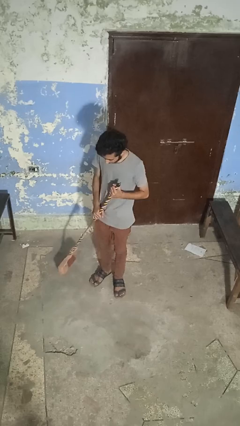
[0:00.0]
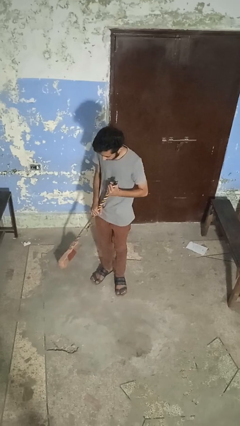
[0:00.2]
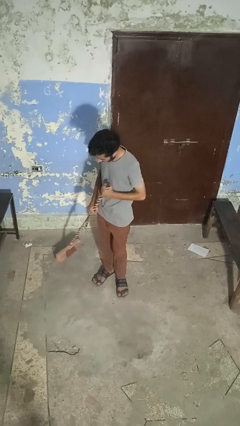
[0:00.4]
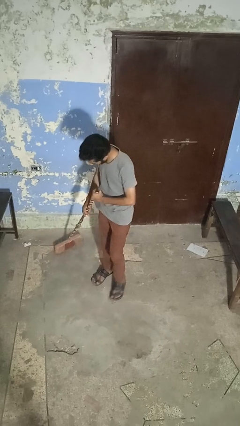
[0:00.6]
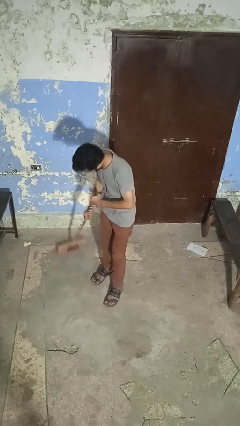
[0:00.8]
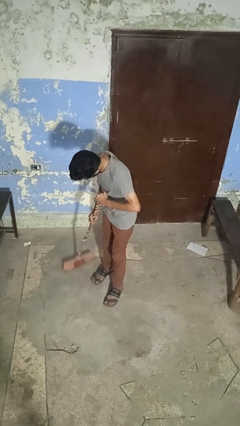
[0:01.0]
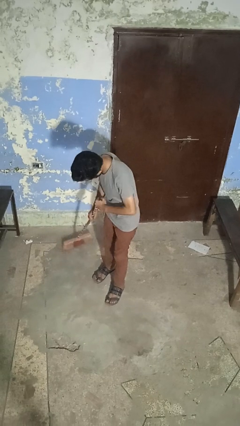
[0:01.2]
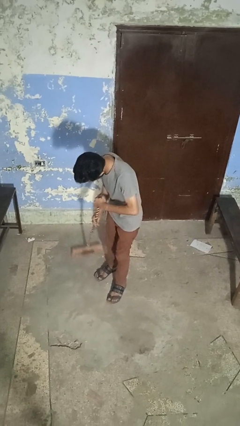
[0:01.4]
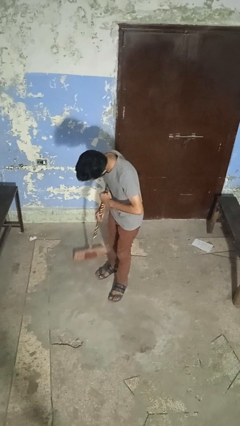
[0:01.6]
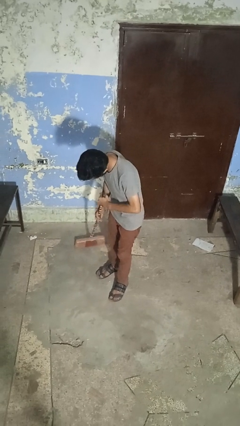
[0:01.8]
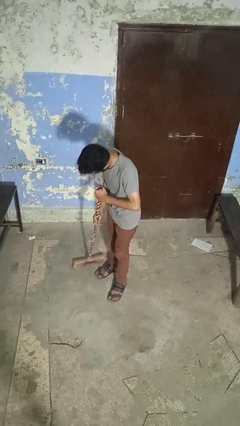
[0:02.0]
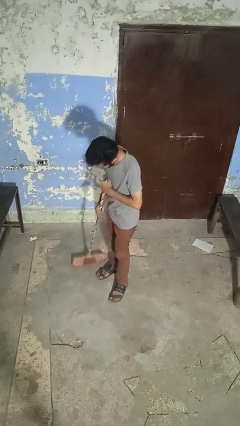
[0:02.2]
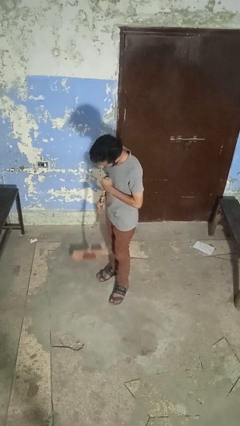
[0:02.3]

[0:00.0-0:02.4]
person sweeps floor

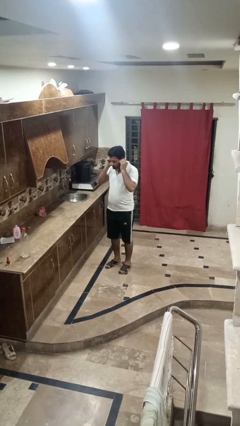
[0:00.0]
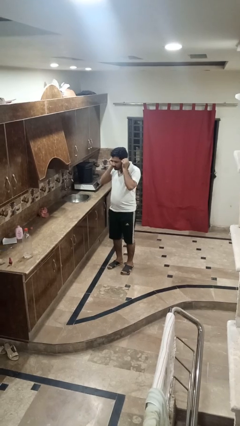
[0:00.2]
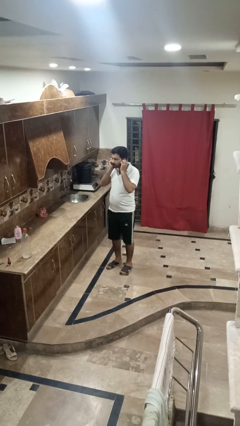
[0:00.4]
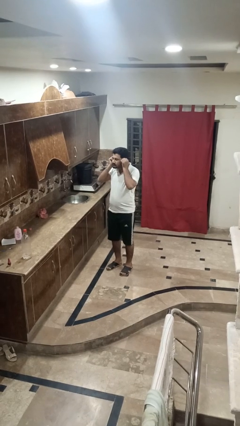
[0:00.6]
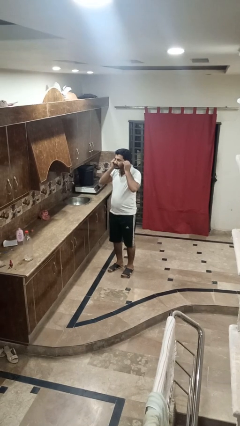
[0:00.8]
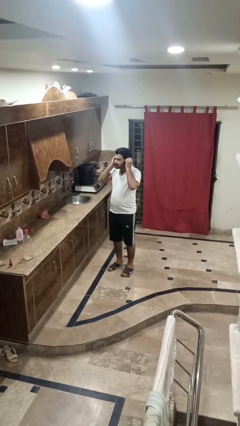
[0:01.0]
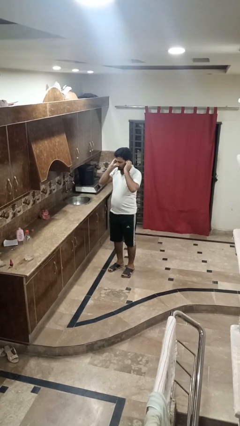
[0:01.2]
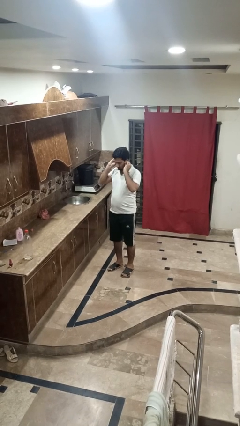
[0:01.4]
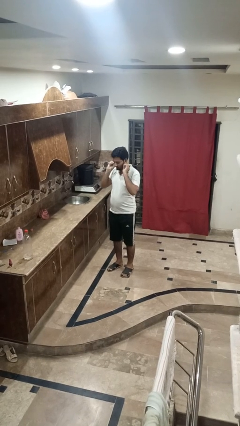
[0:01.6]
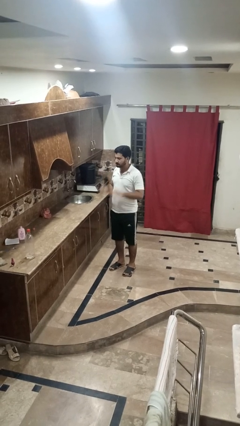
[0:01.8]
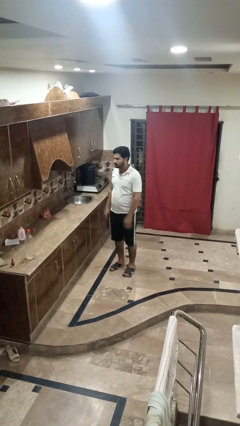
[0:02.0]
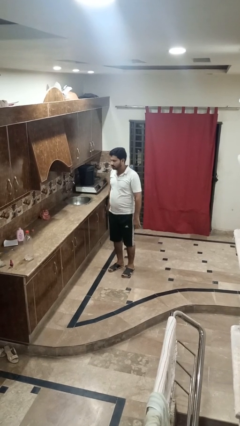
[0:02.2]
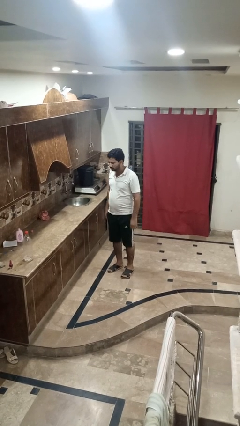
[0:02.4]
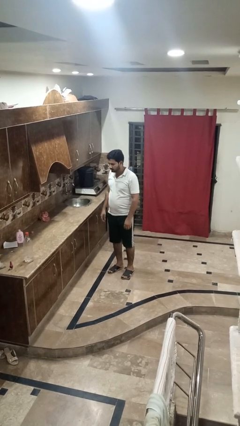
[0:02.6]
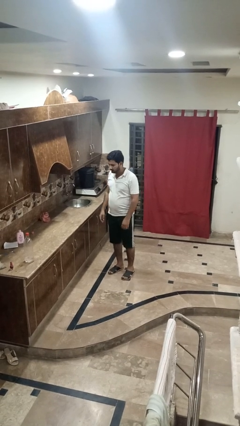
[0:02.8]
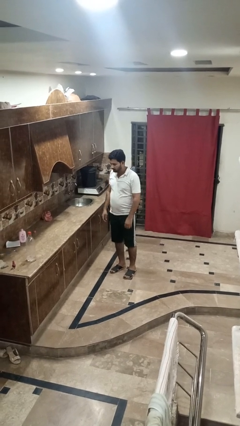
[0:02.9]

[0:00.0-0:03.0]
person touches earlobe

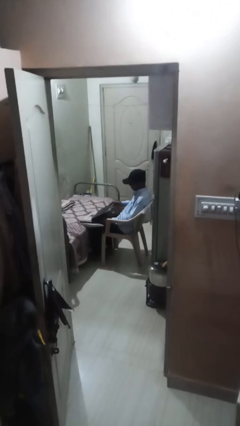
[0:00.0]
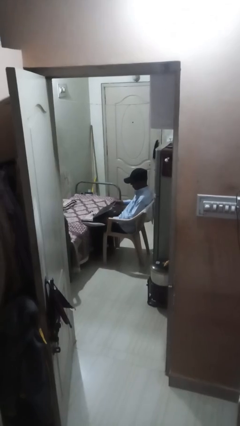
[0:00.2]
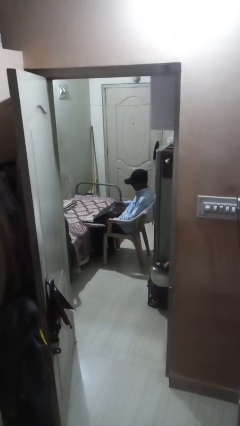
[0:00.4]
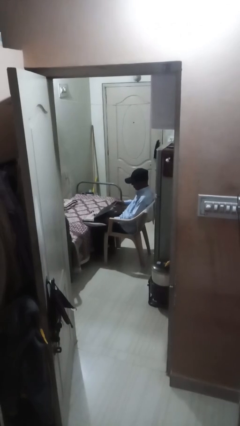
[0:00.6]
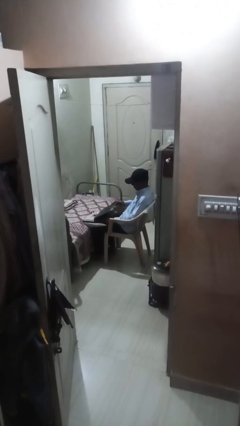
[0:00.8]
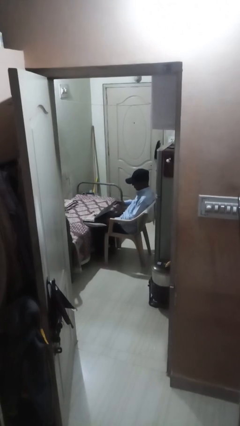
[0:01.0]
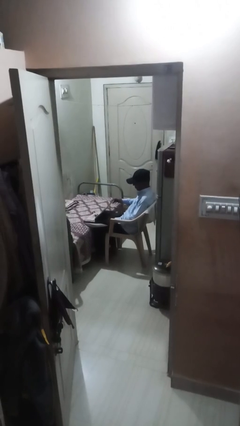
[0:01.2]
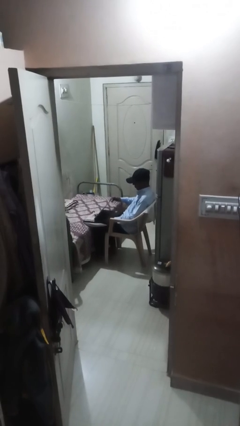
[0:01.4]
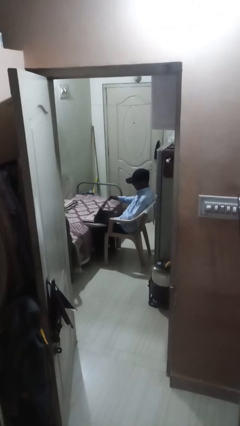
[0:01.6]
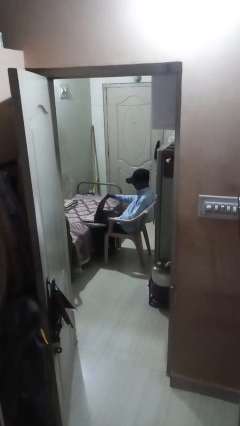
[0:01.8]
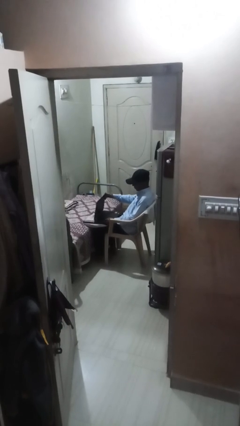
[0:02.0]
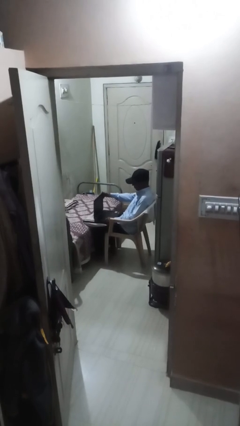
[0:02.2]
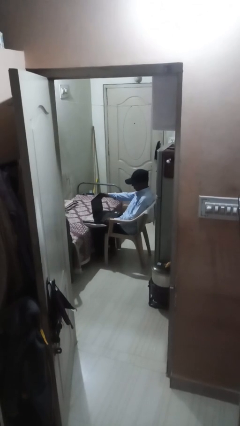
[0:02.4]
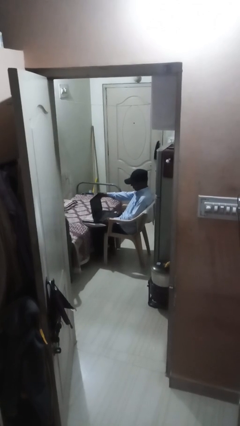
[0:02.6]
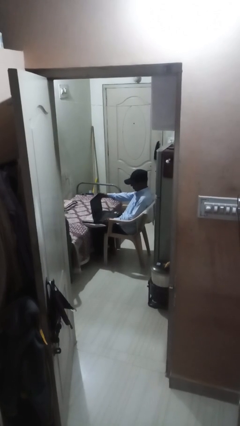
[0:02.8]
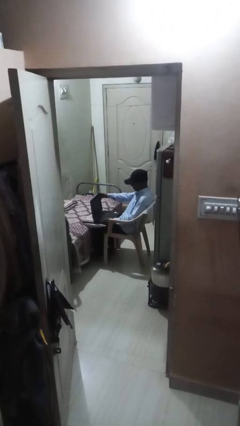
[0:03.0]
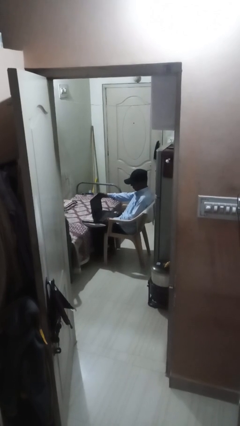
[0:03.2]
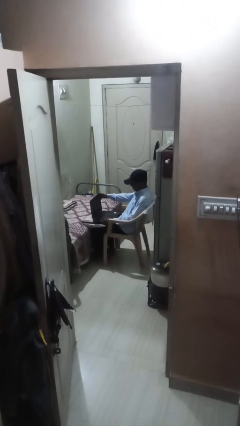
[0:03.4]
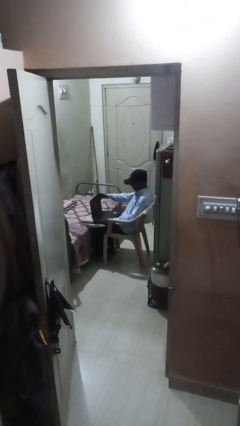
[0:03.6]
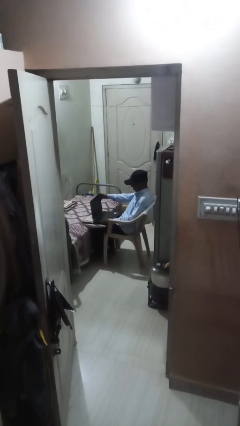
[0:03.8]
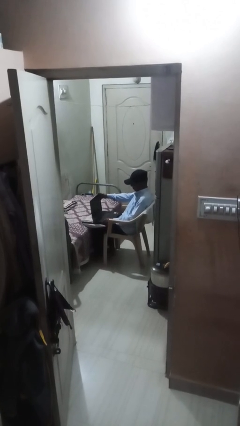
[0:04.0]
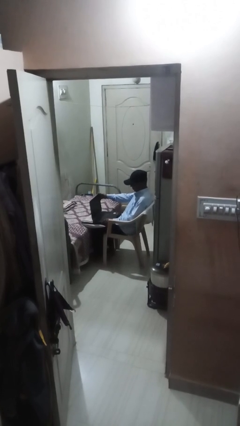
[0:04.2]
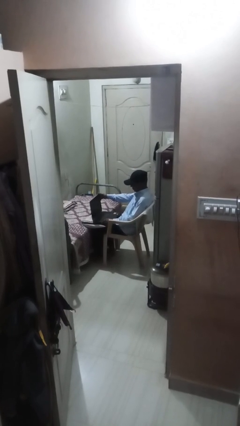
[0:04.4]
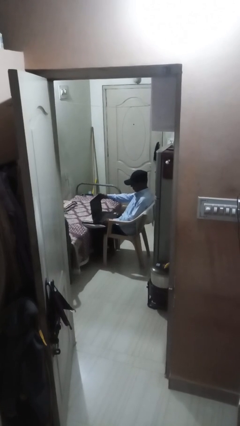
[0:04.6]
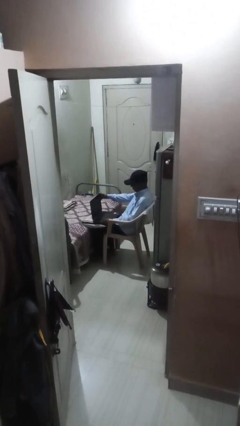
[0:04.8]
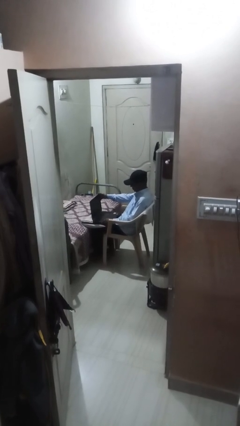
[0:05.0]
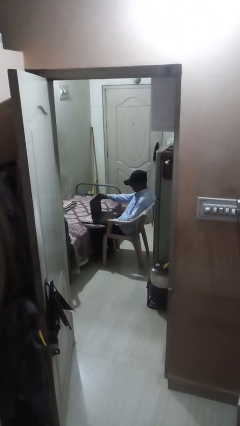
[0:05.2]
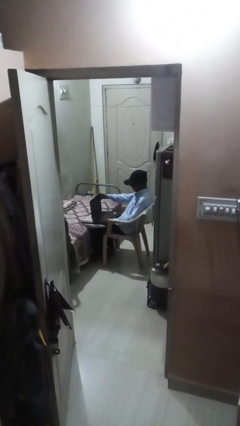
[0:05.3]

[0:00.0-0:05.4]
person interacts with laptop

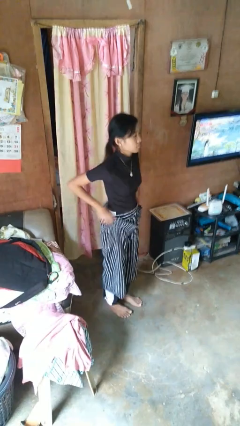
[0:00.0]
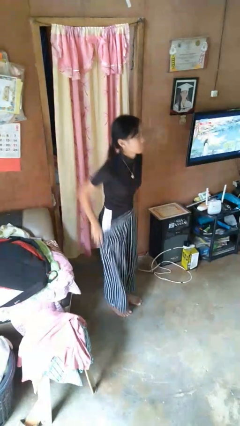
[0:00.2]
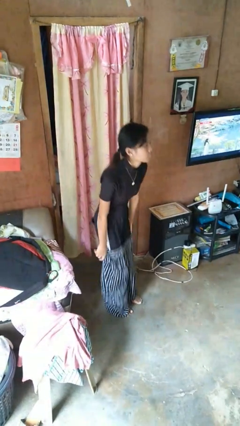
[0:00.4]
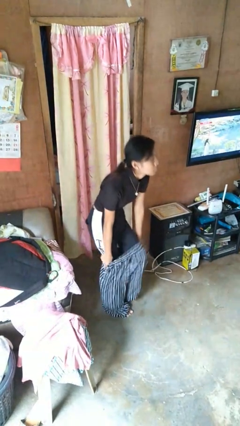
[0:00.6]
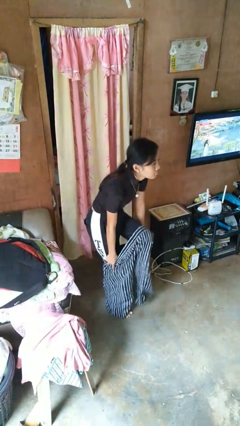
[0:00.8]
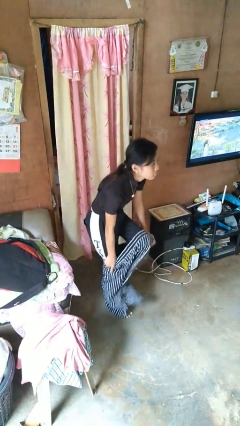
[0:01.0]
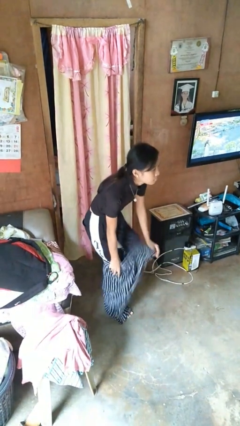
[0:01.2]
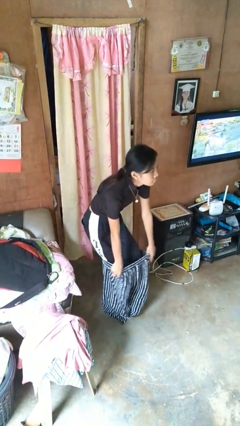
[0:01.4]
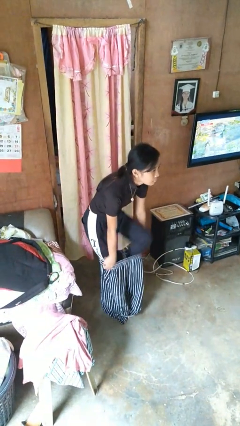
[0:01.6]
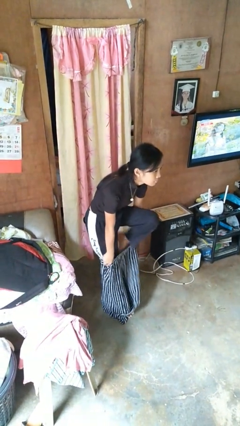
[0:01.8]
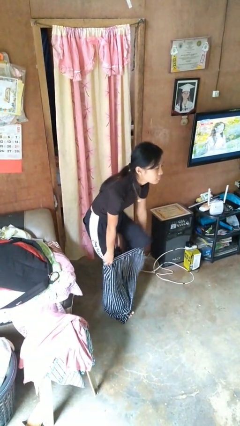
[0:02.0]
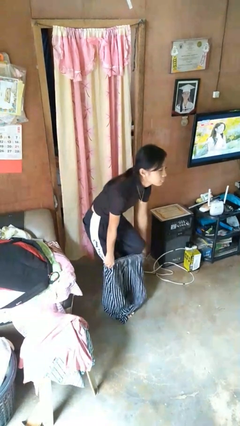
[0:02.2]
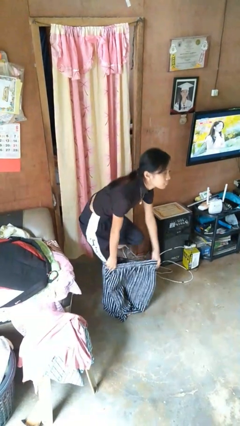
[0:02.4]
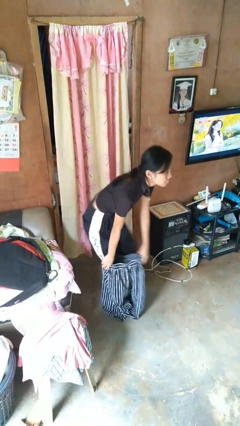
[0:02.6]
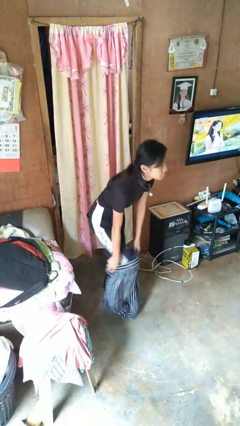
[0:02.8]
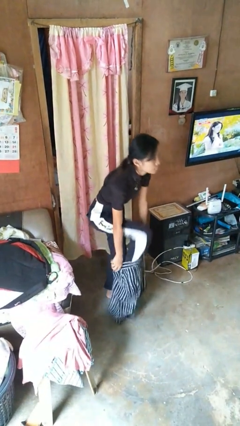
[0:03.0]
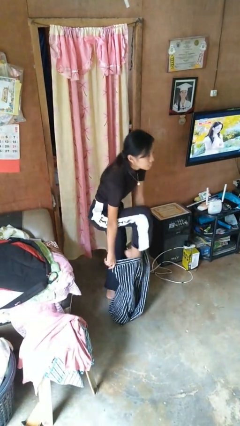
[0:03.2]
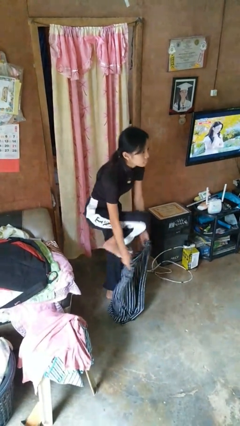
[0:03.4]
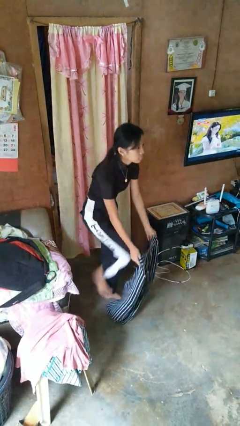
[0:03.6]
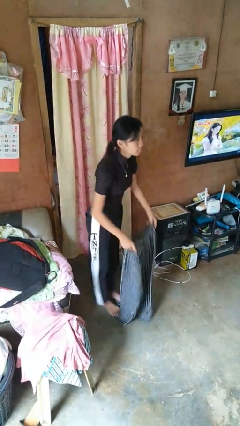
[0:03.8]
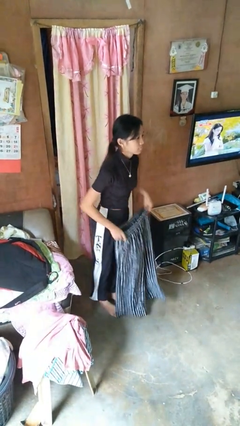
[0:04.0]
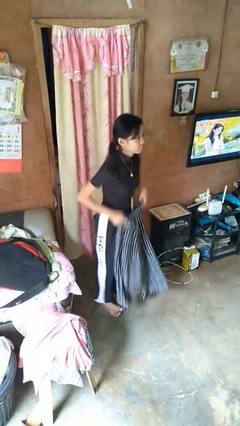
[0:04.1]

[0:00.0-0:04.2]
person takes off pants

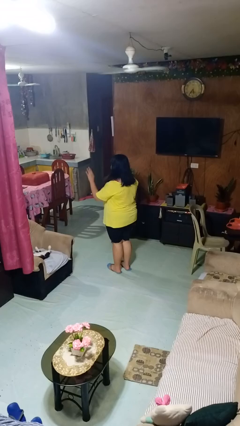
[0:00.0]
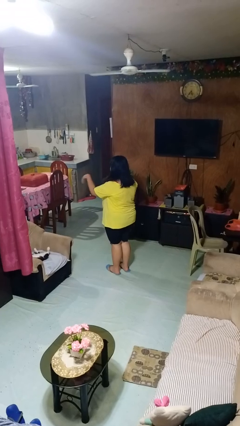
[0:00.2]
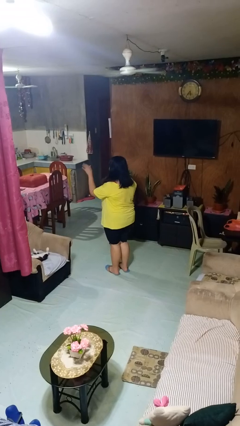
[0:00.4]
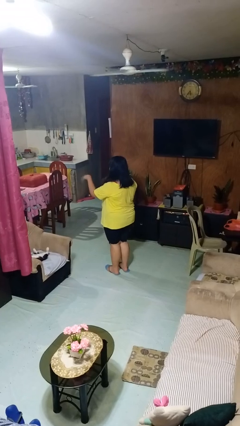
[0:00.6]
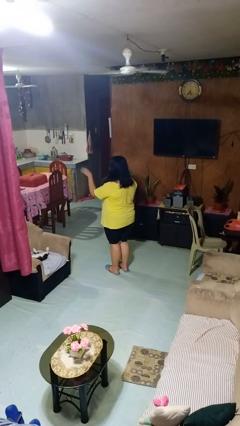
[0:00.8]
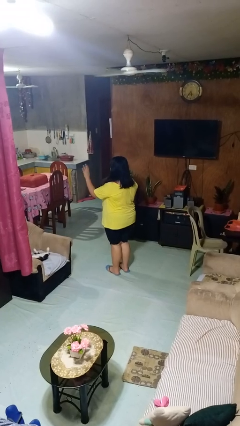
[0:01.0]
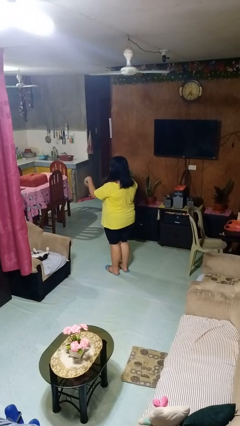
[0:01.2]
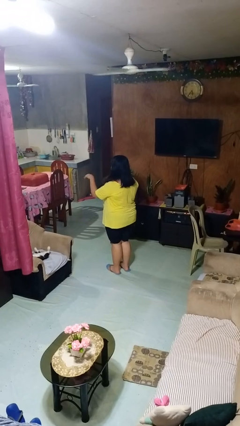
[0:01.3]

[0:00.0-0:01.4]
person gestures come here

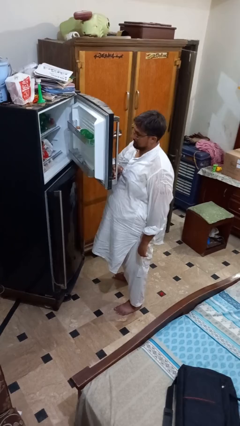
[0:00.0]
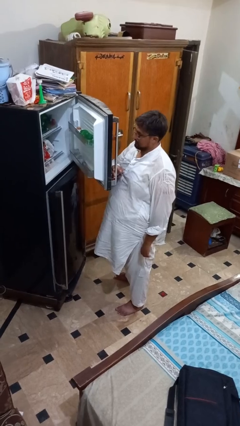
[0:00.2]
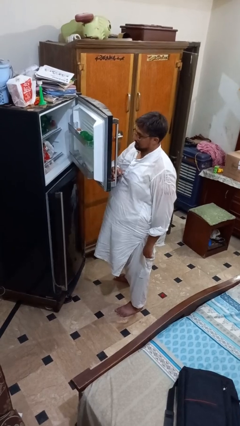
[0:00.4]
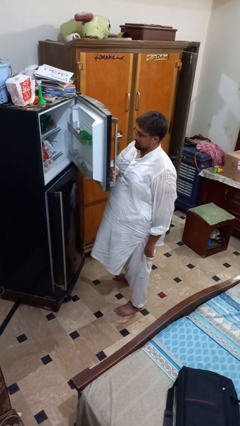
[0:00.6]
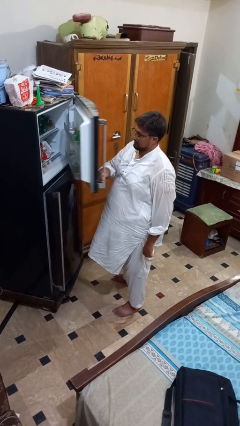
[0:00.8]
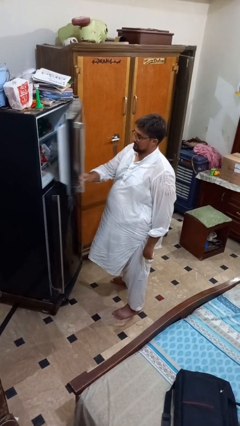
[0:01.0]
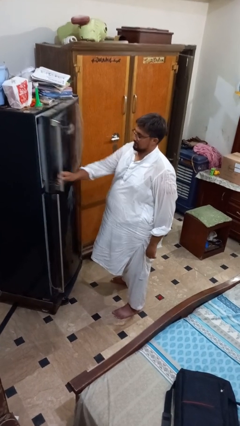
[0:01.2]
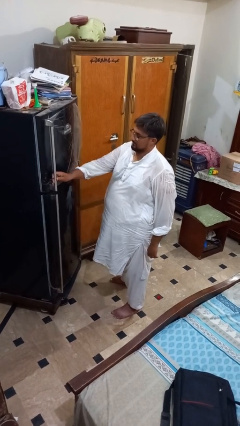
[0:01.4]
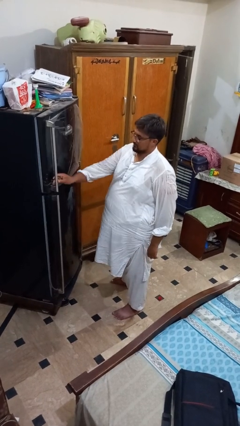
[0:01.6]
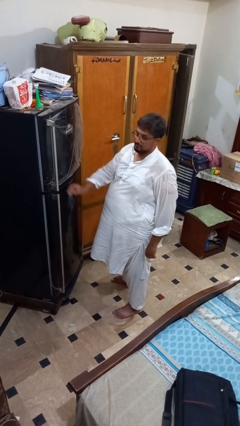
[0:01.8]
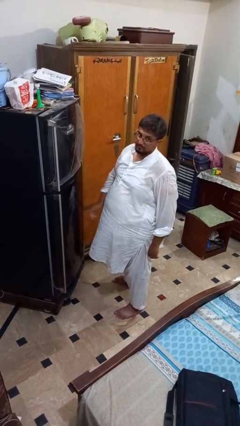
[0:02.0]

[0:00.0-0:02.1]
person closes refrigerator
